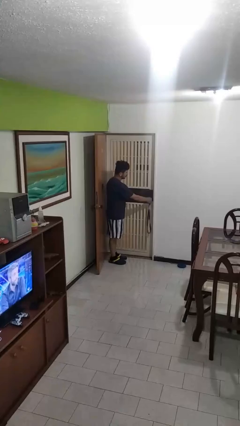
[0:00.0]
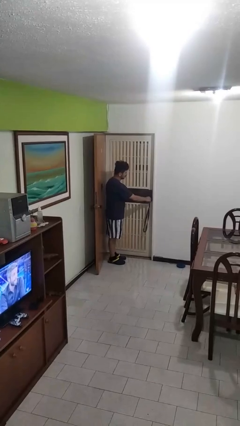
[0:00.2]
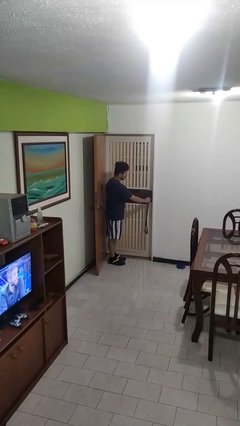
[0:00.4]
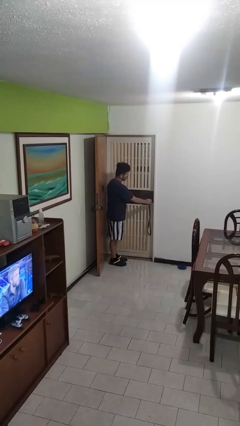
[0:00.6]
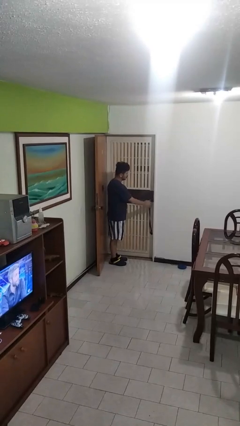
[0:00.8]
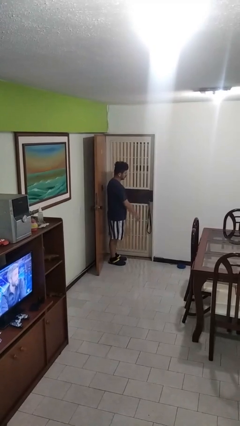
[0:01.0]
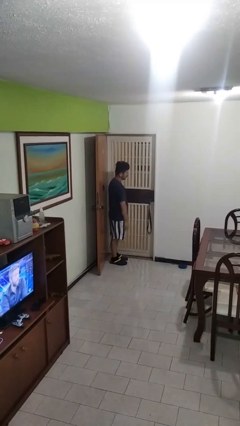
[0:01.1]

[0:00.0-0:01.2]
person unlocks door with keys

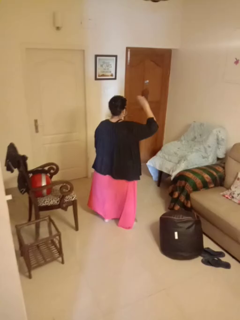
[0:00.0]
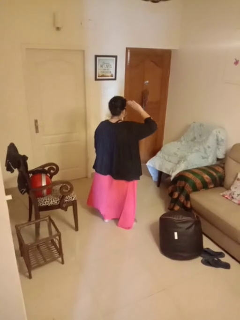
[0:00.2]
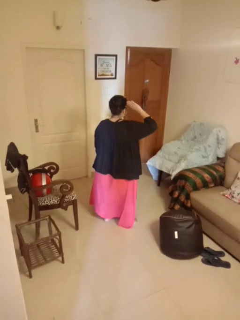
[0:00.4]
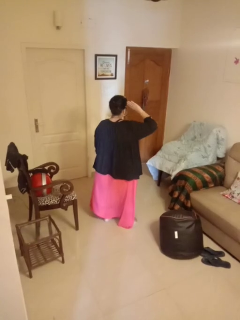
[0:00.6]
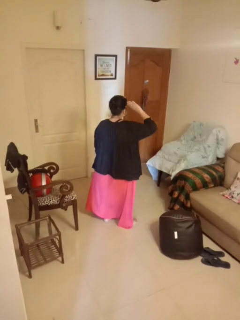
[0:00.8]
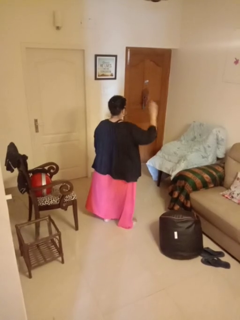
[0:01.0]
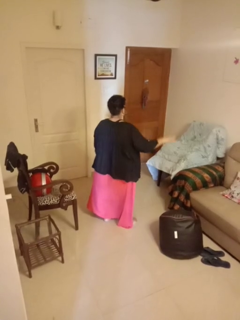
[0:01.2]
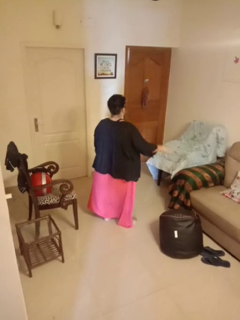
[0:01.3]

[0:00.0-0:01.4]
person salutes

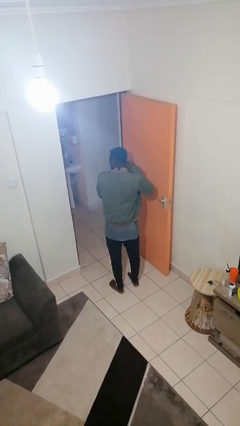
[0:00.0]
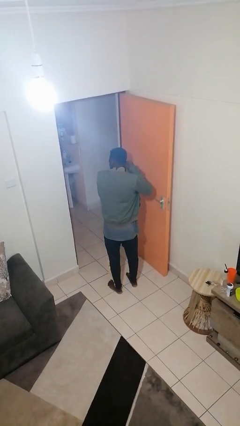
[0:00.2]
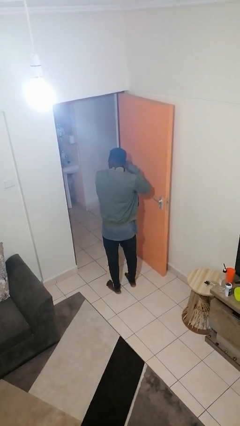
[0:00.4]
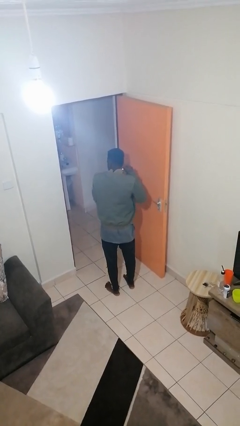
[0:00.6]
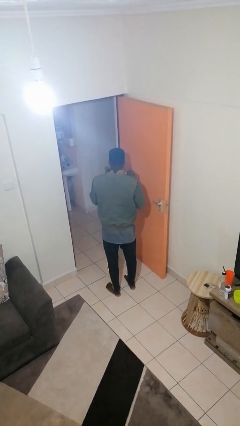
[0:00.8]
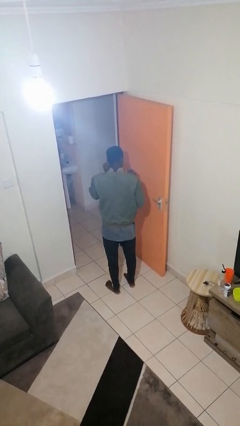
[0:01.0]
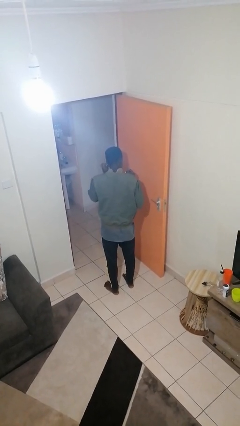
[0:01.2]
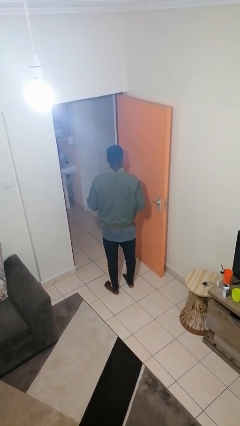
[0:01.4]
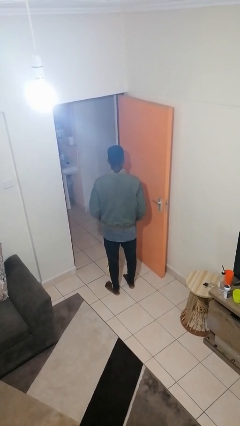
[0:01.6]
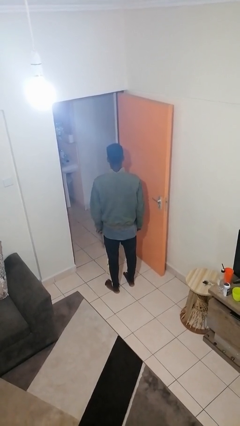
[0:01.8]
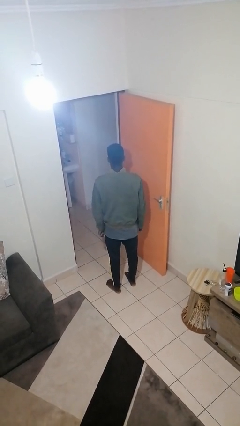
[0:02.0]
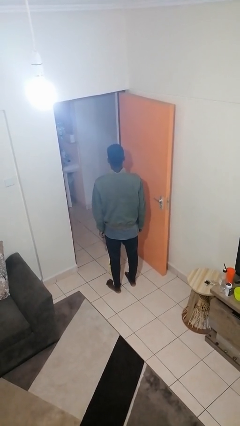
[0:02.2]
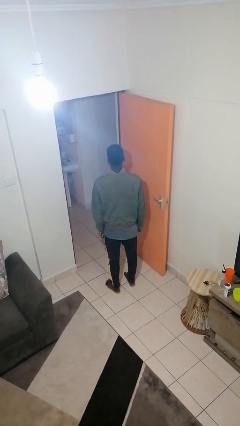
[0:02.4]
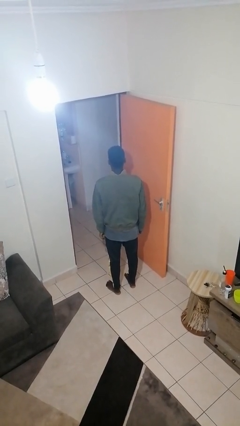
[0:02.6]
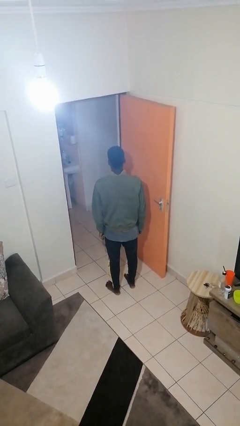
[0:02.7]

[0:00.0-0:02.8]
person puts on earrings

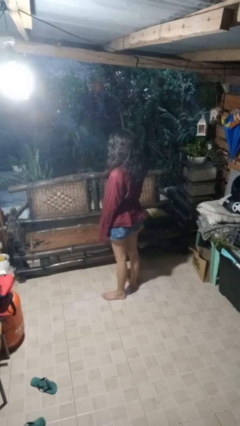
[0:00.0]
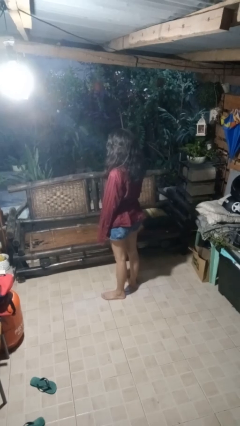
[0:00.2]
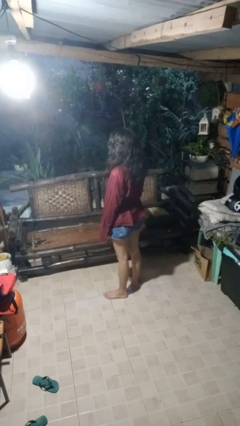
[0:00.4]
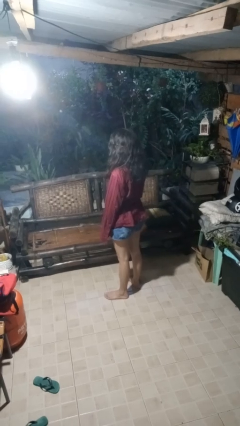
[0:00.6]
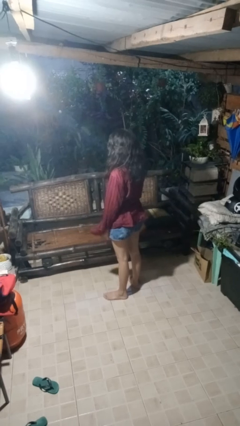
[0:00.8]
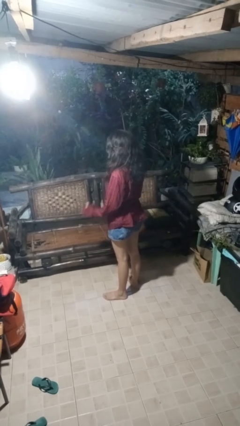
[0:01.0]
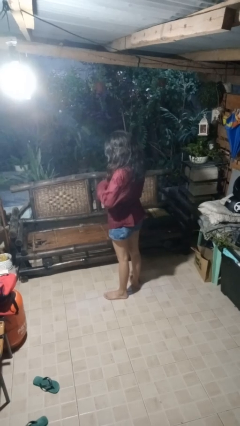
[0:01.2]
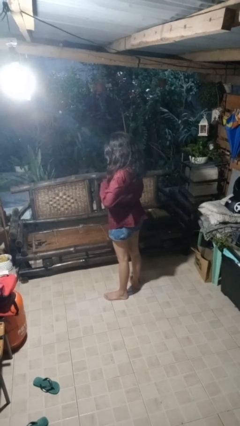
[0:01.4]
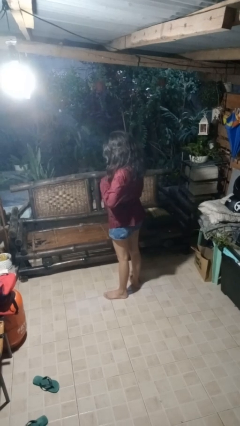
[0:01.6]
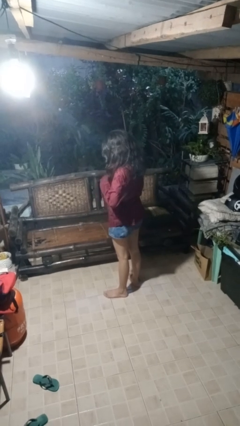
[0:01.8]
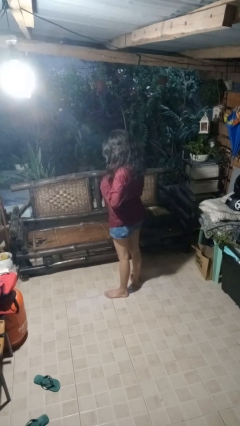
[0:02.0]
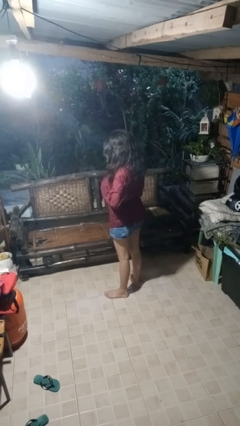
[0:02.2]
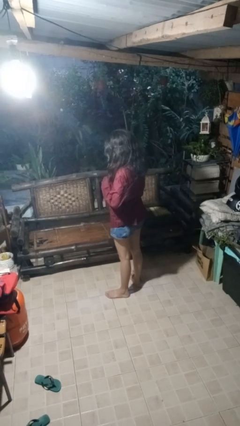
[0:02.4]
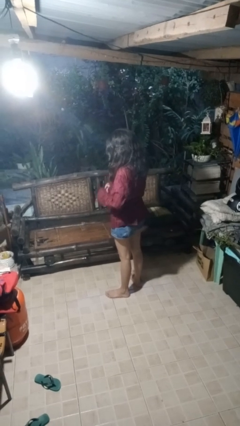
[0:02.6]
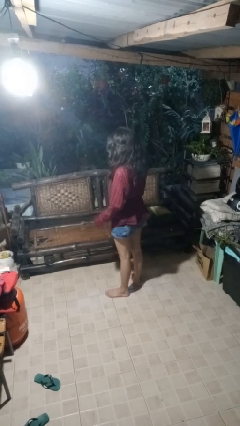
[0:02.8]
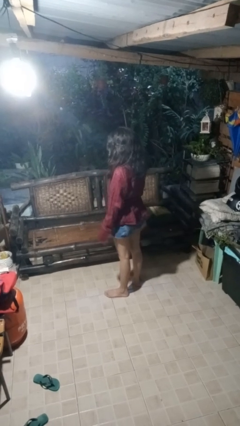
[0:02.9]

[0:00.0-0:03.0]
person buttons shirt

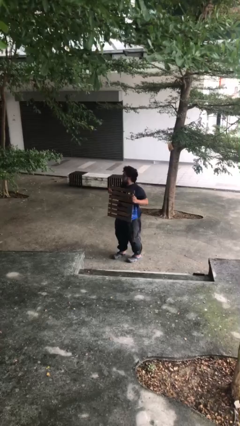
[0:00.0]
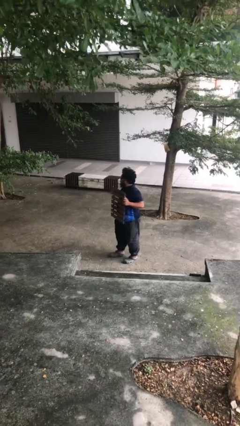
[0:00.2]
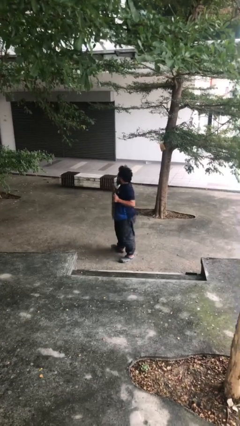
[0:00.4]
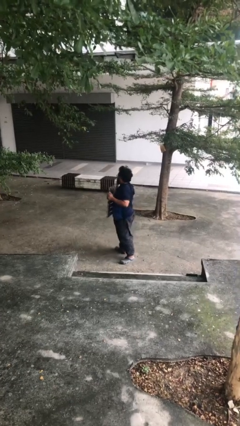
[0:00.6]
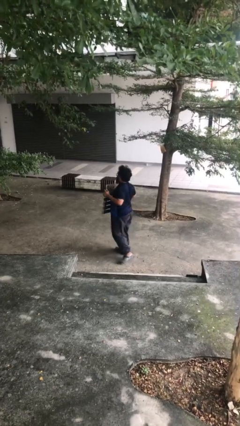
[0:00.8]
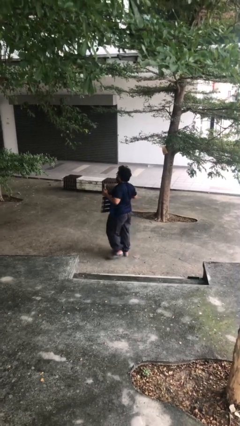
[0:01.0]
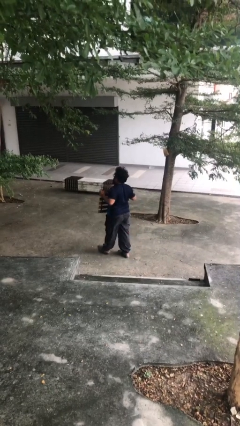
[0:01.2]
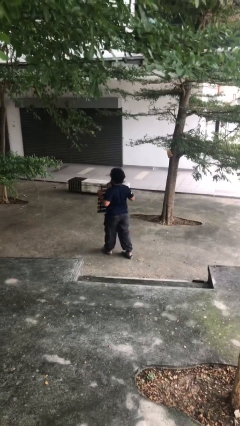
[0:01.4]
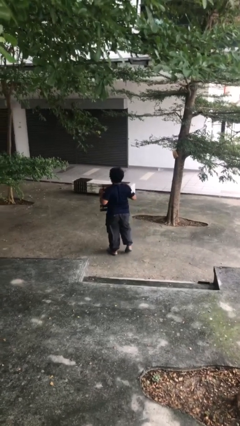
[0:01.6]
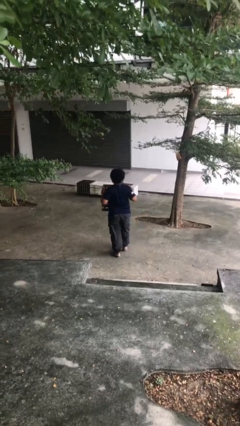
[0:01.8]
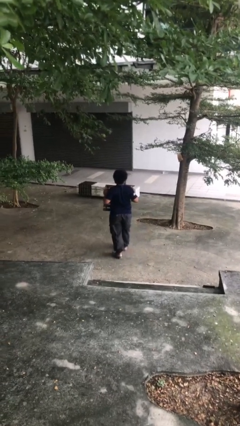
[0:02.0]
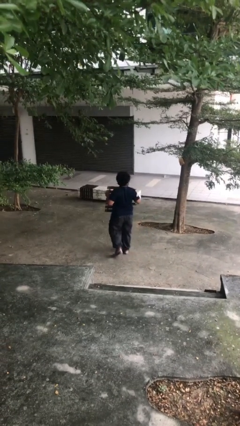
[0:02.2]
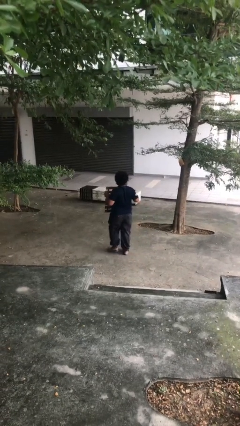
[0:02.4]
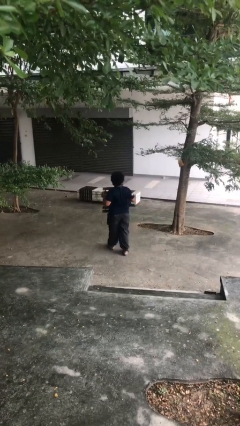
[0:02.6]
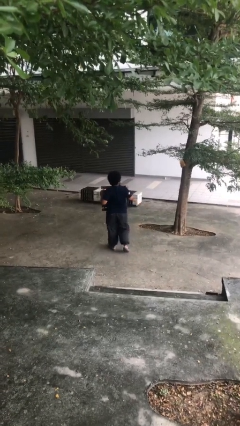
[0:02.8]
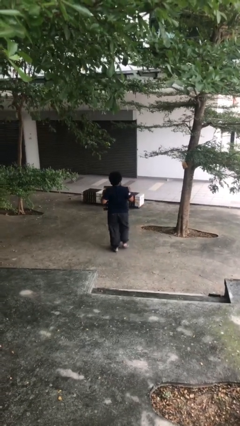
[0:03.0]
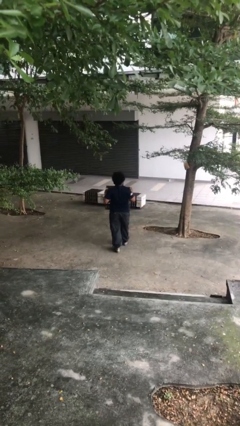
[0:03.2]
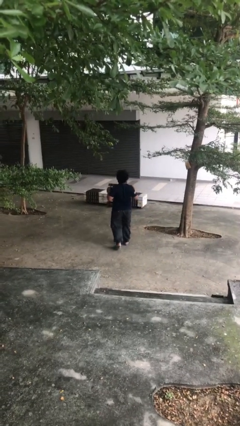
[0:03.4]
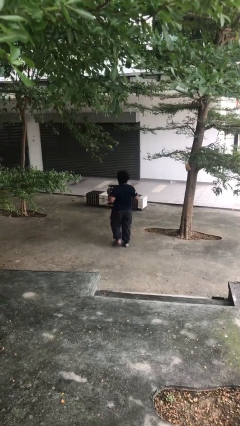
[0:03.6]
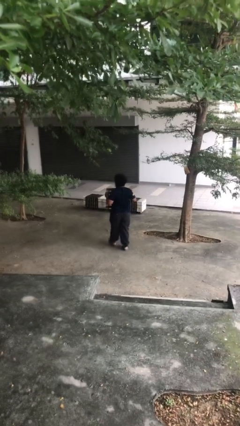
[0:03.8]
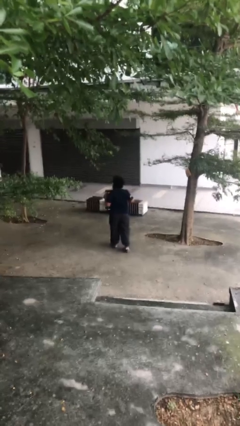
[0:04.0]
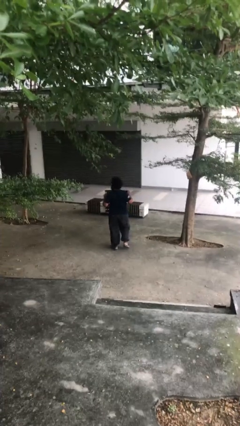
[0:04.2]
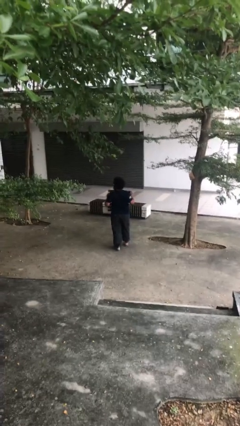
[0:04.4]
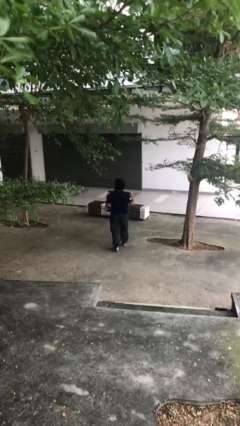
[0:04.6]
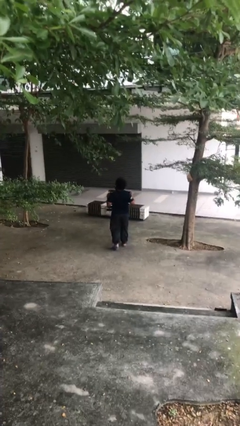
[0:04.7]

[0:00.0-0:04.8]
person carries heavy object

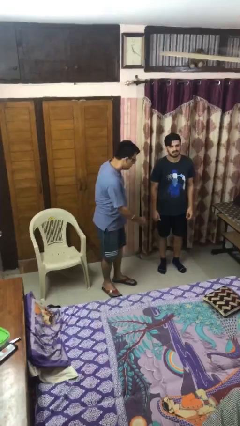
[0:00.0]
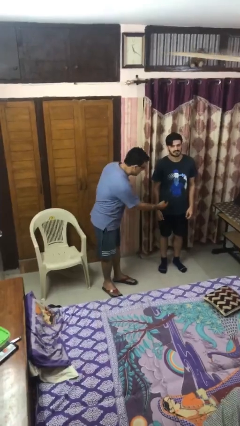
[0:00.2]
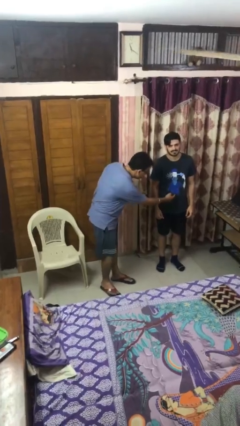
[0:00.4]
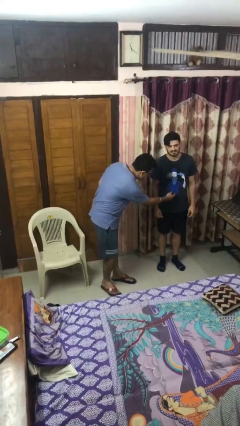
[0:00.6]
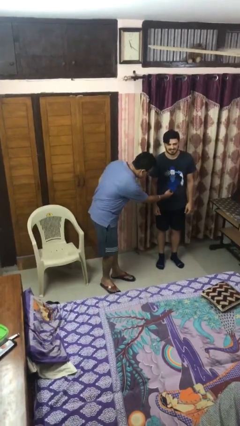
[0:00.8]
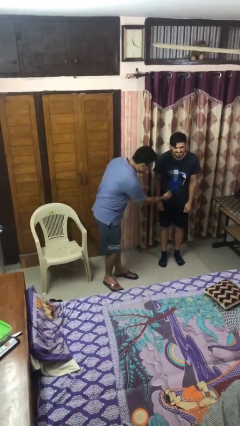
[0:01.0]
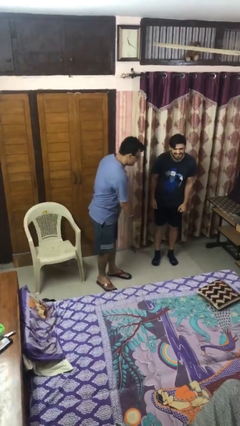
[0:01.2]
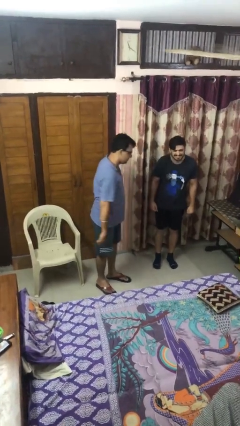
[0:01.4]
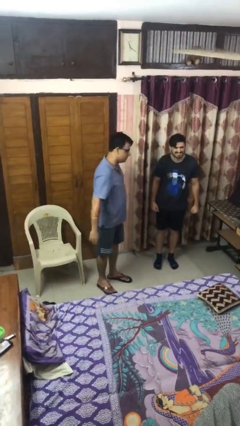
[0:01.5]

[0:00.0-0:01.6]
person tickles person

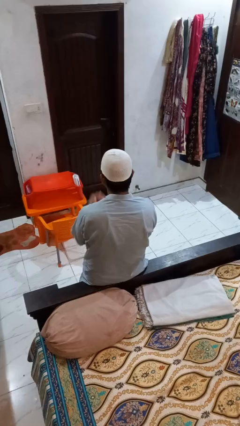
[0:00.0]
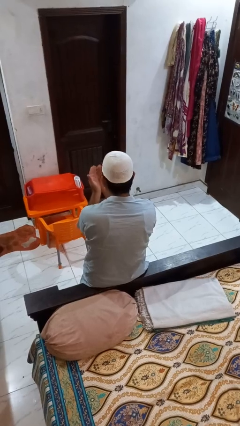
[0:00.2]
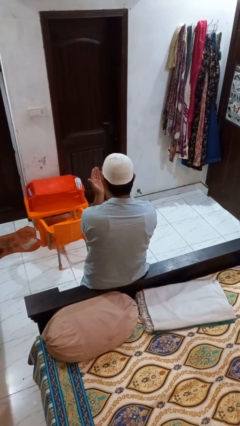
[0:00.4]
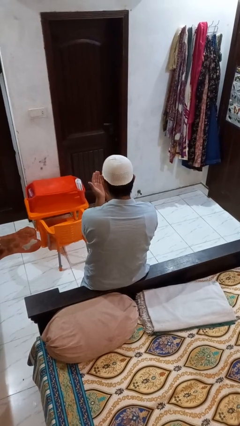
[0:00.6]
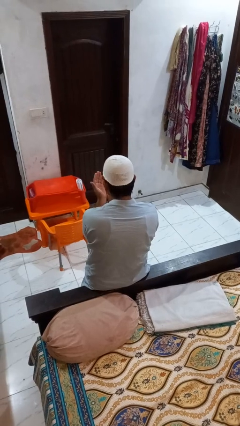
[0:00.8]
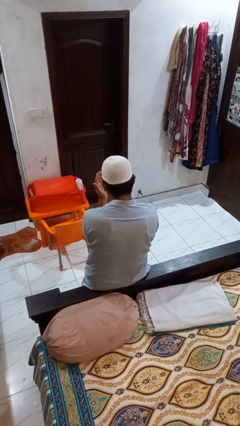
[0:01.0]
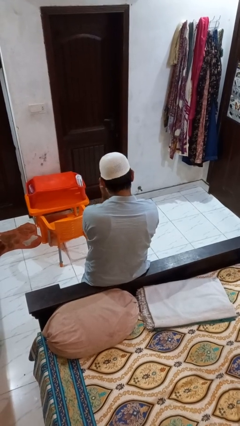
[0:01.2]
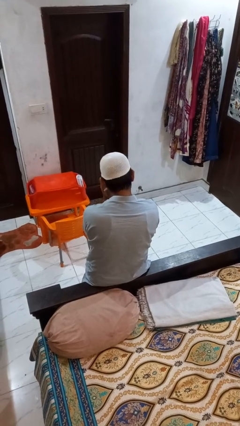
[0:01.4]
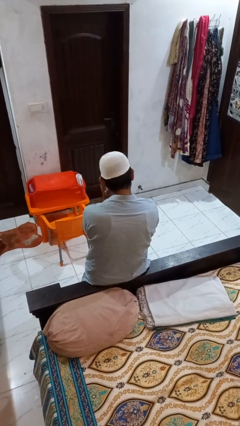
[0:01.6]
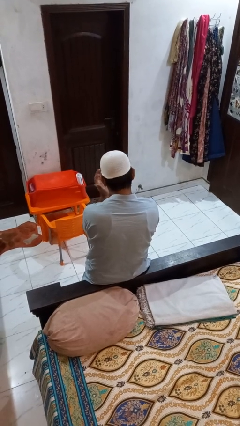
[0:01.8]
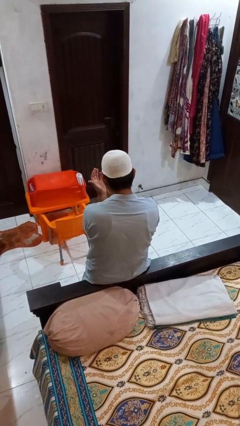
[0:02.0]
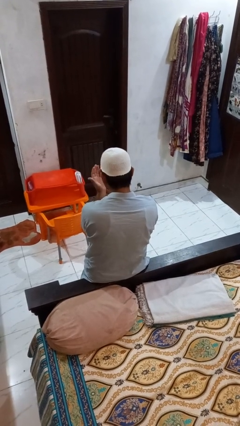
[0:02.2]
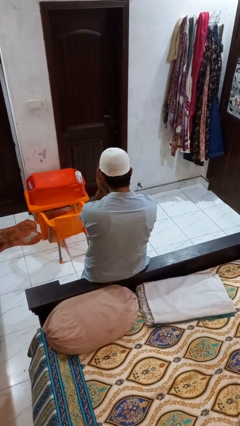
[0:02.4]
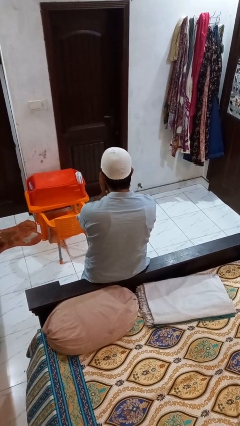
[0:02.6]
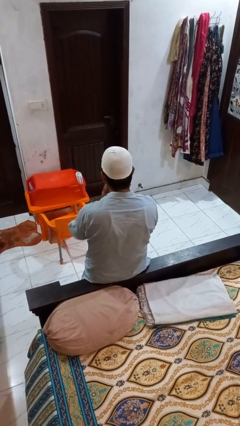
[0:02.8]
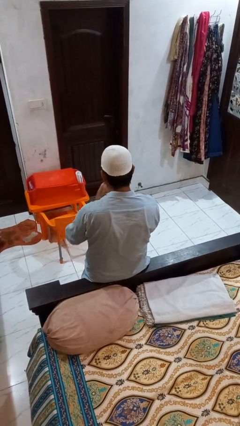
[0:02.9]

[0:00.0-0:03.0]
person prays
